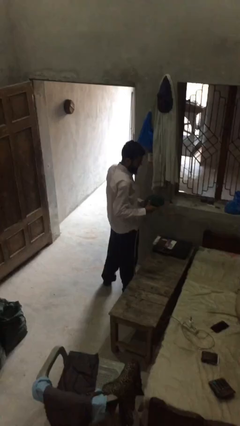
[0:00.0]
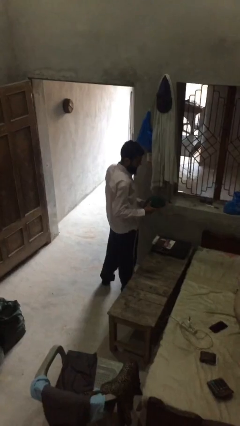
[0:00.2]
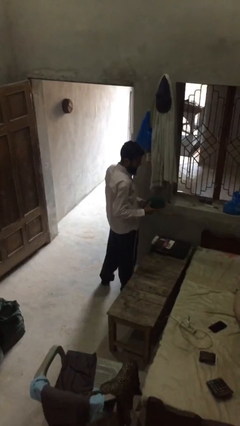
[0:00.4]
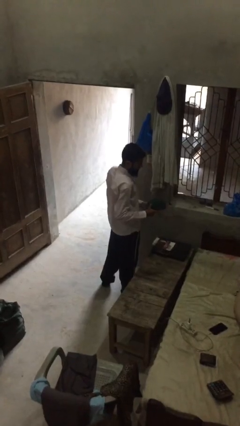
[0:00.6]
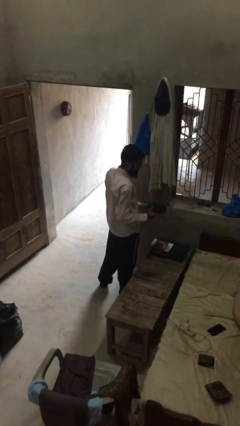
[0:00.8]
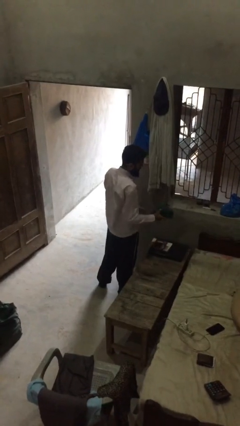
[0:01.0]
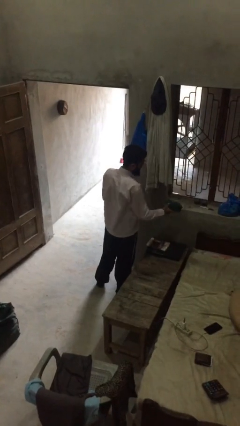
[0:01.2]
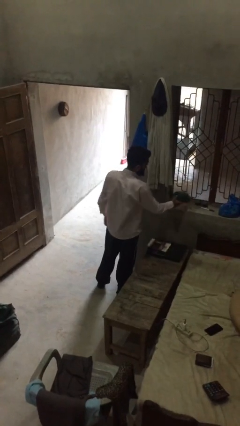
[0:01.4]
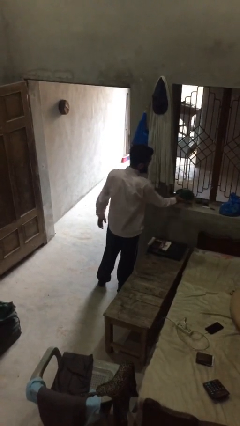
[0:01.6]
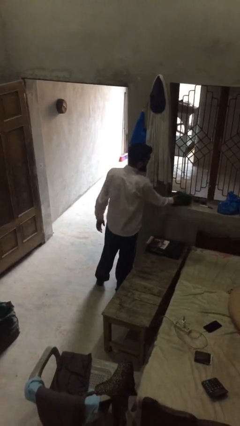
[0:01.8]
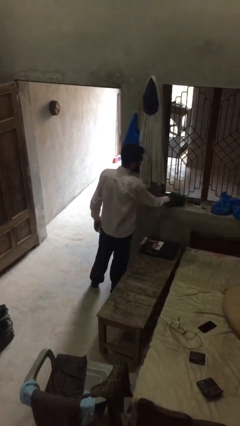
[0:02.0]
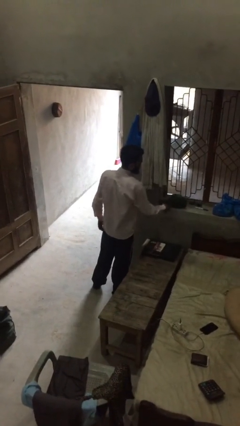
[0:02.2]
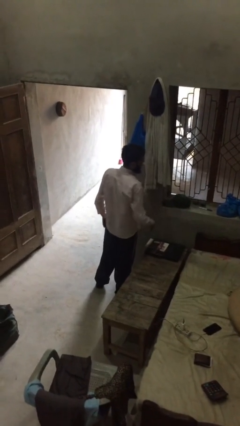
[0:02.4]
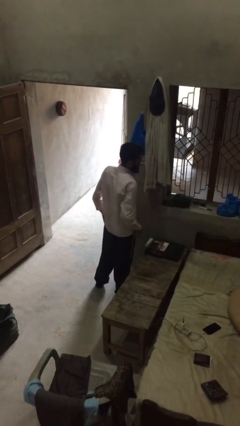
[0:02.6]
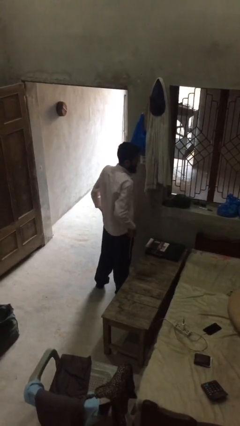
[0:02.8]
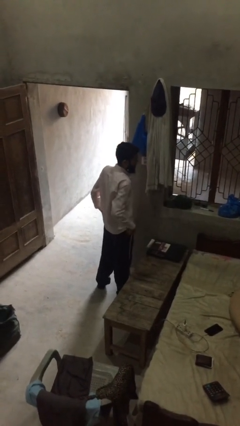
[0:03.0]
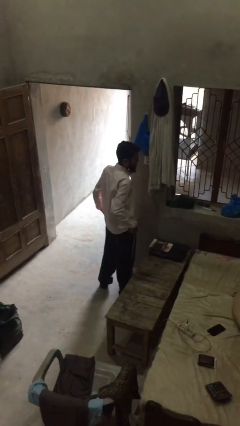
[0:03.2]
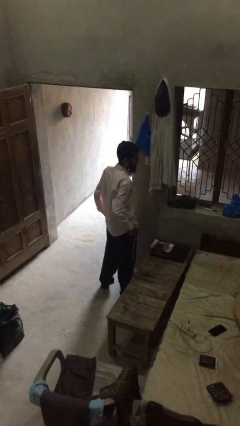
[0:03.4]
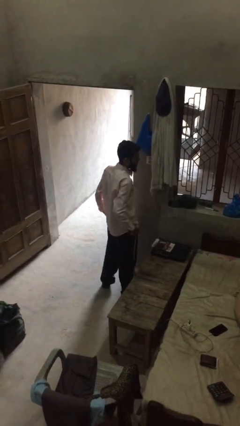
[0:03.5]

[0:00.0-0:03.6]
person puts down object on shelf

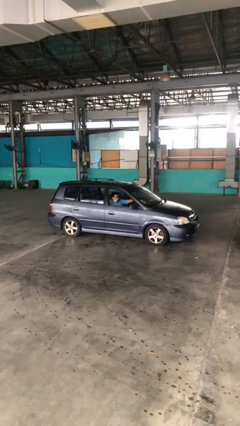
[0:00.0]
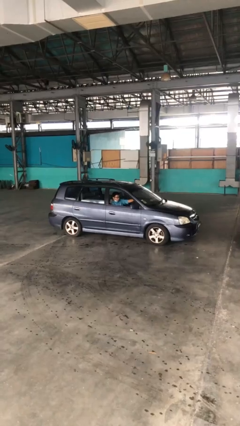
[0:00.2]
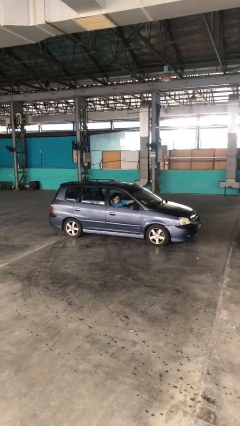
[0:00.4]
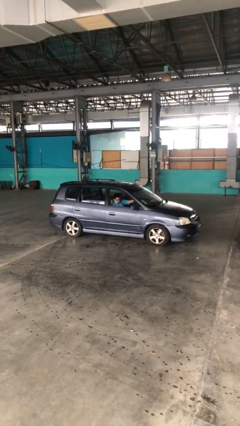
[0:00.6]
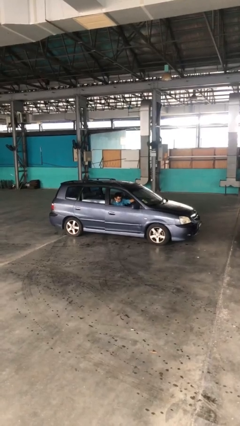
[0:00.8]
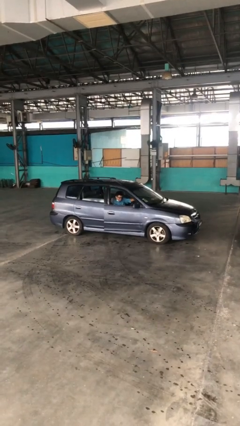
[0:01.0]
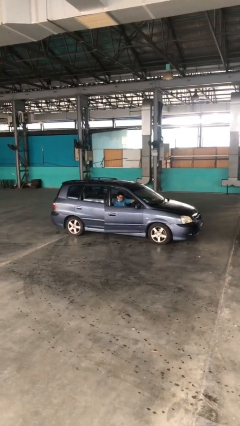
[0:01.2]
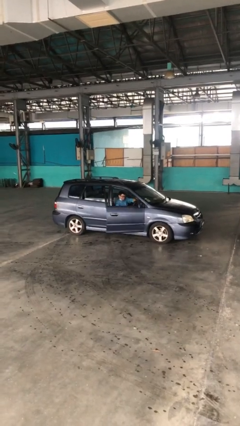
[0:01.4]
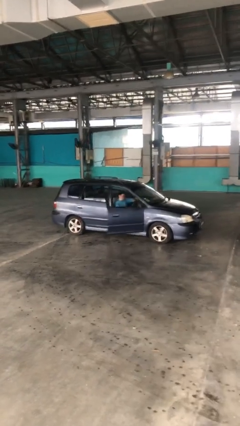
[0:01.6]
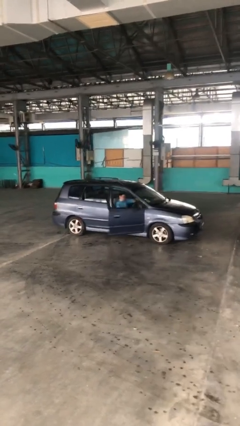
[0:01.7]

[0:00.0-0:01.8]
person opens car door

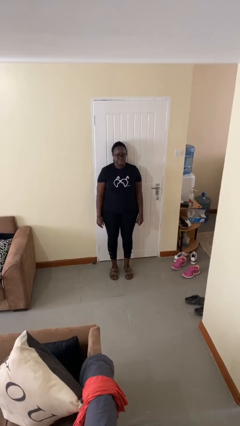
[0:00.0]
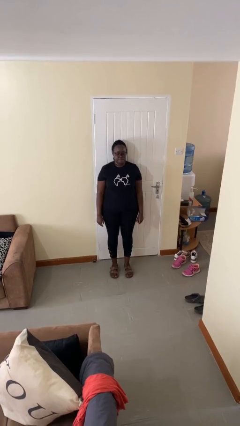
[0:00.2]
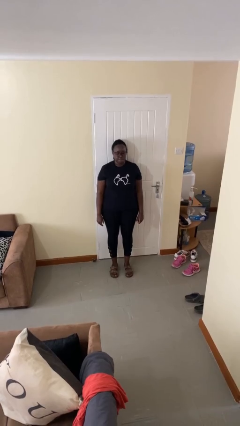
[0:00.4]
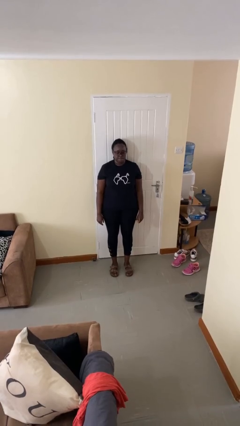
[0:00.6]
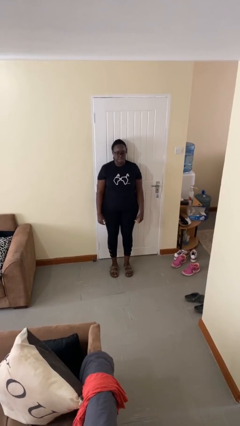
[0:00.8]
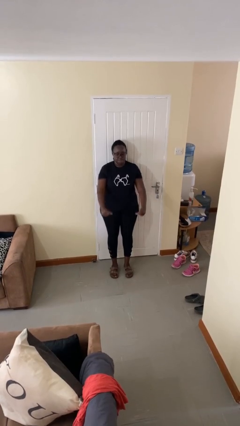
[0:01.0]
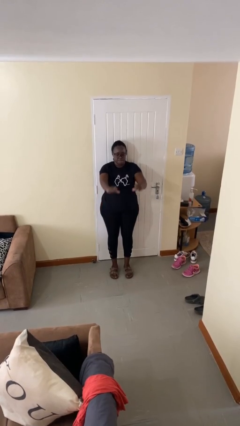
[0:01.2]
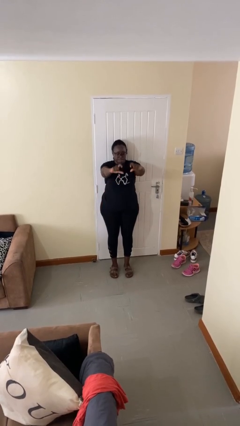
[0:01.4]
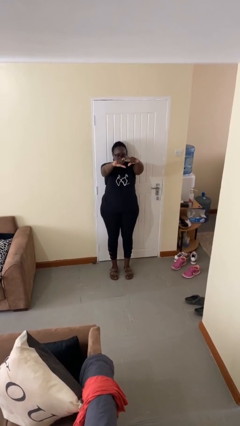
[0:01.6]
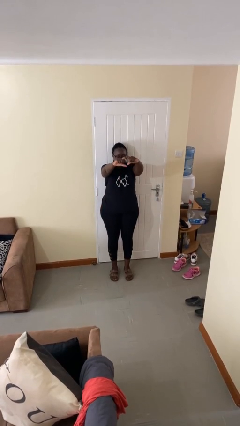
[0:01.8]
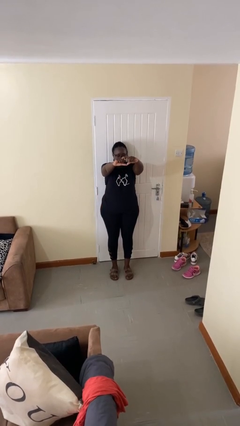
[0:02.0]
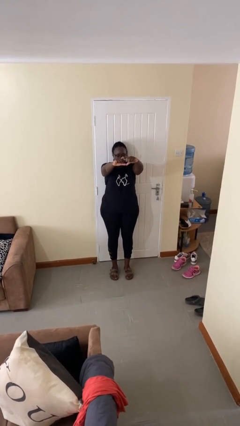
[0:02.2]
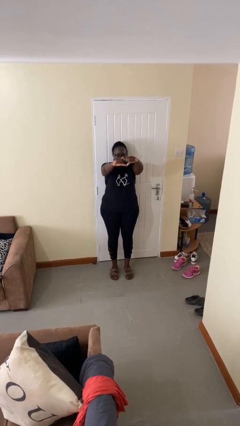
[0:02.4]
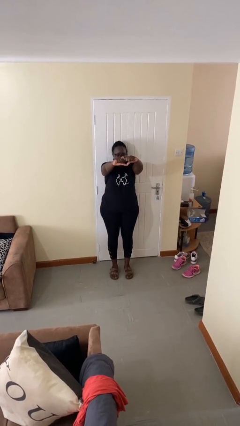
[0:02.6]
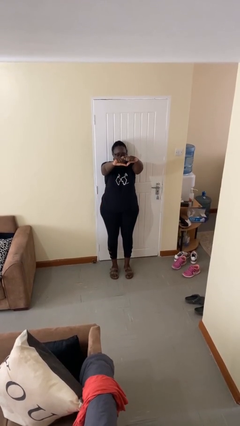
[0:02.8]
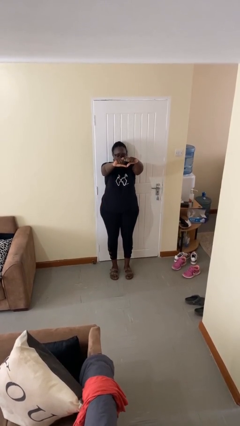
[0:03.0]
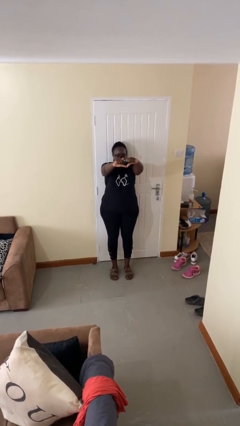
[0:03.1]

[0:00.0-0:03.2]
person gestures heart

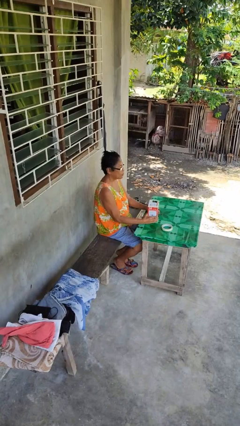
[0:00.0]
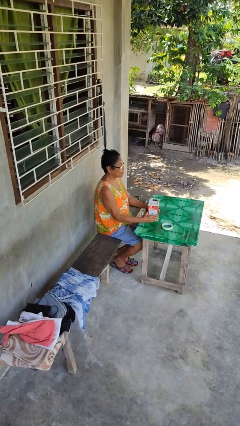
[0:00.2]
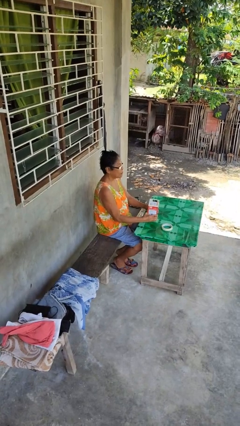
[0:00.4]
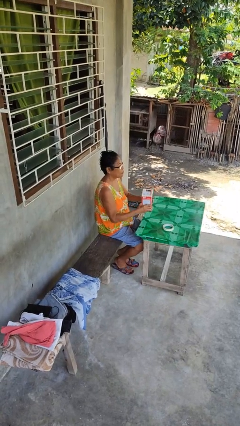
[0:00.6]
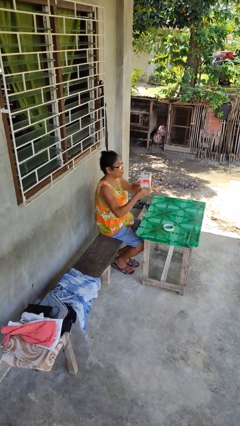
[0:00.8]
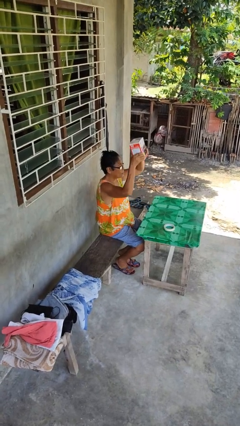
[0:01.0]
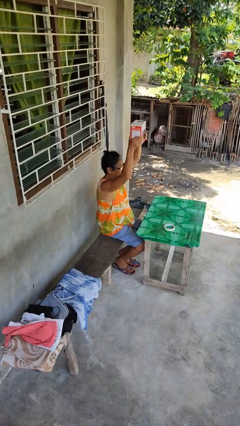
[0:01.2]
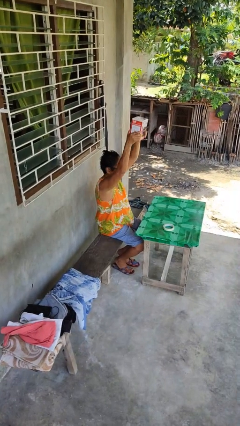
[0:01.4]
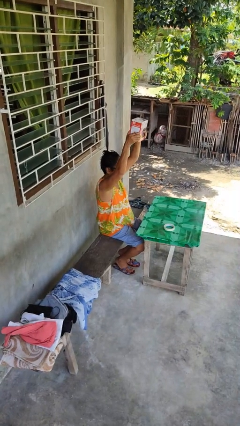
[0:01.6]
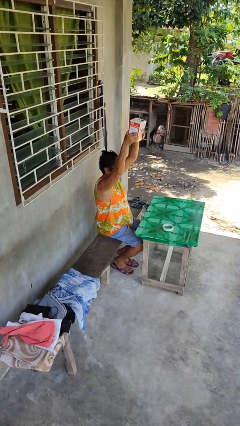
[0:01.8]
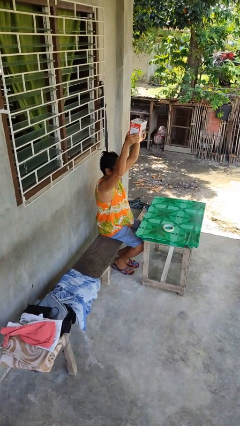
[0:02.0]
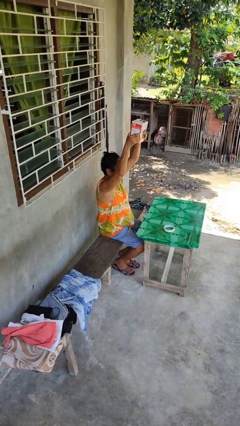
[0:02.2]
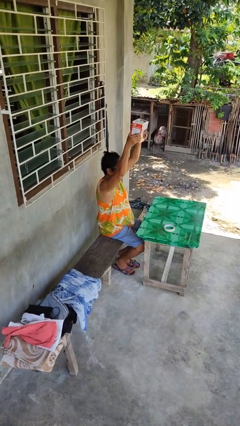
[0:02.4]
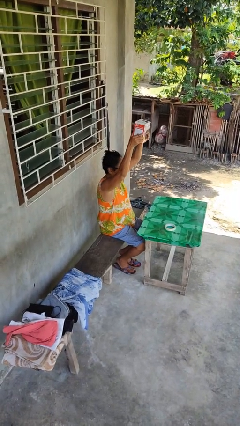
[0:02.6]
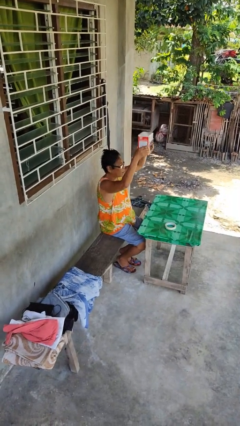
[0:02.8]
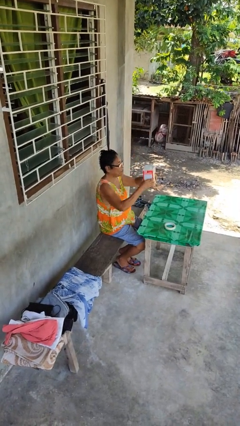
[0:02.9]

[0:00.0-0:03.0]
person holds object above head

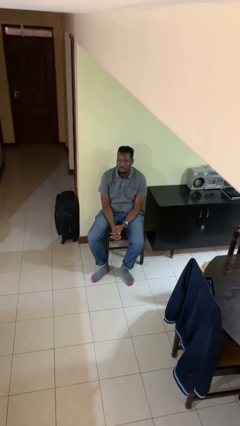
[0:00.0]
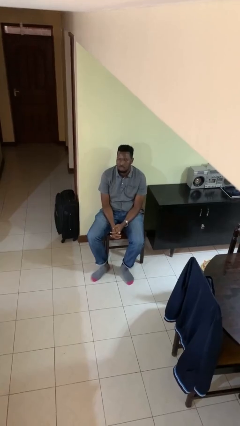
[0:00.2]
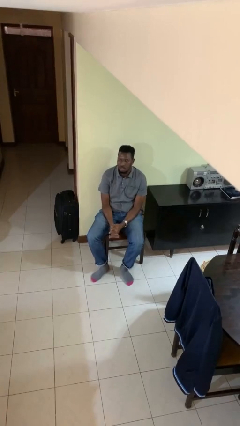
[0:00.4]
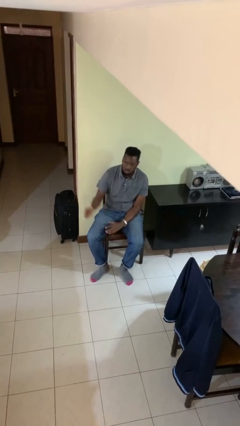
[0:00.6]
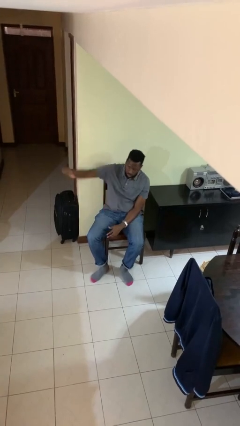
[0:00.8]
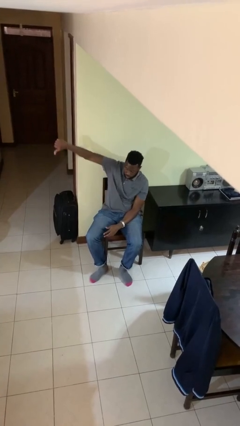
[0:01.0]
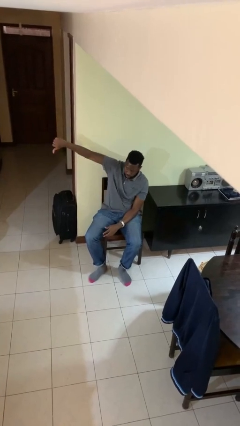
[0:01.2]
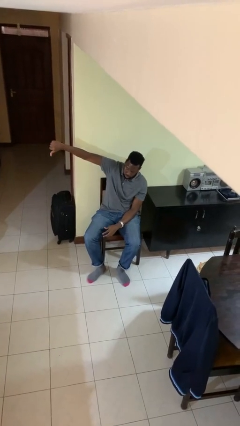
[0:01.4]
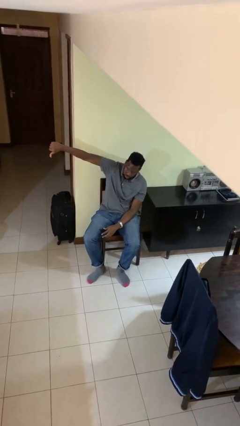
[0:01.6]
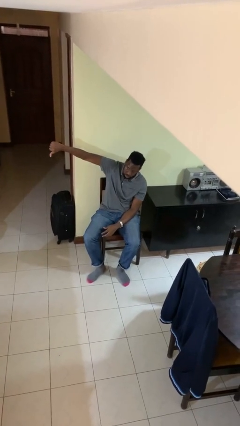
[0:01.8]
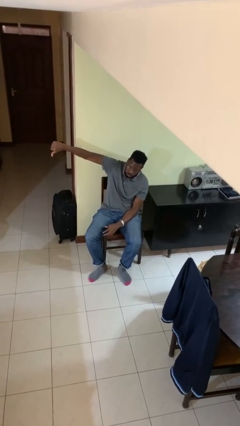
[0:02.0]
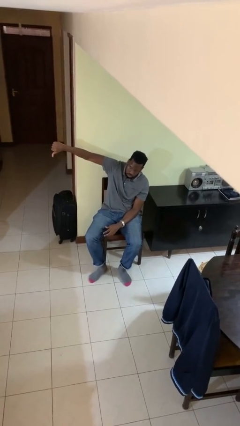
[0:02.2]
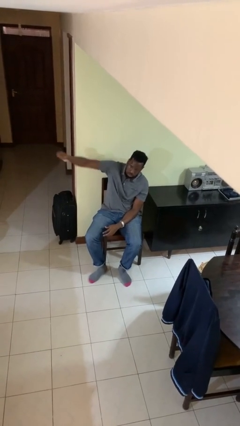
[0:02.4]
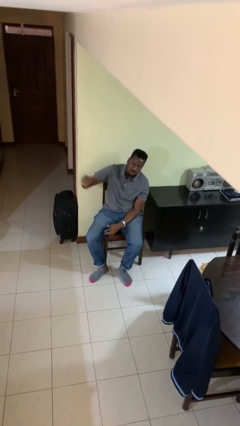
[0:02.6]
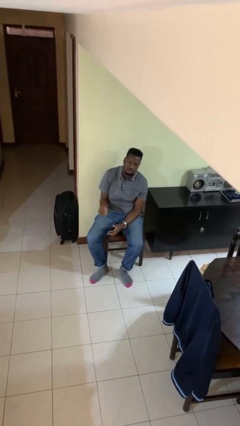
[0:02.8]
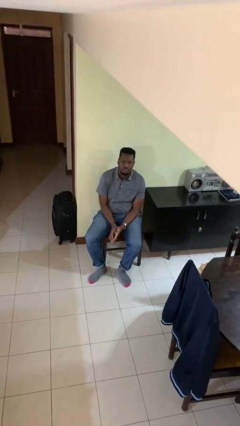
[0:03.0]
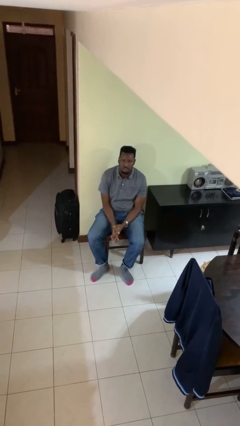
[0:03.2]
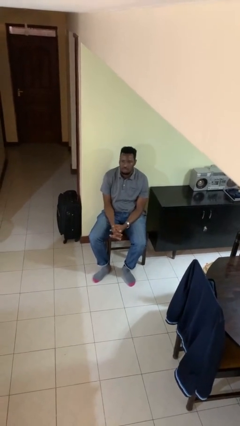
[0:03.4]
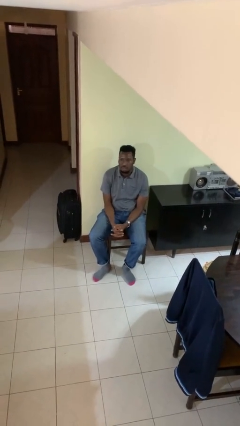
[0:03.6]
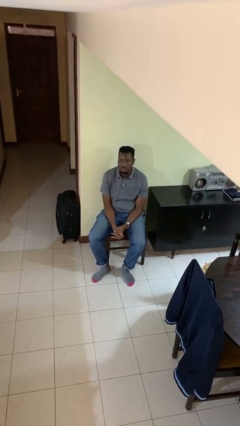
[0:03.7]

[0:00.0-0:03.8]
person gestures thumbs down

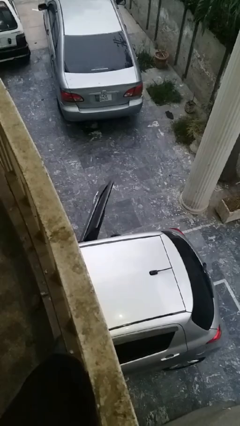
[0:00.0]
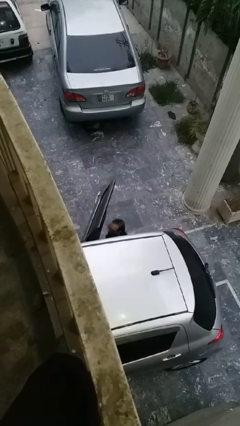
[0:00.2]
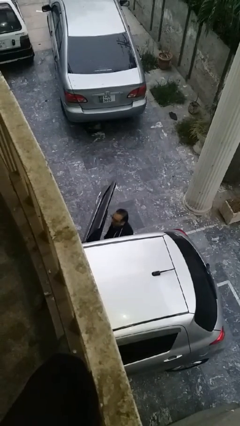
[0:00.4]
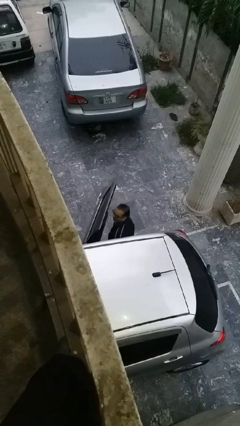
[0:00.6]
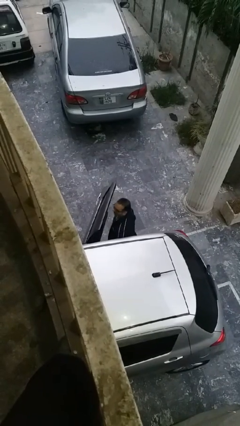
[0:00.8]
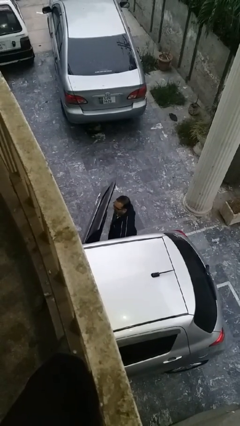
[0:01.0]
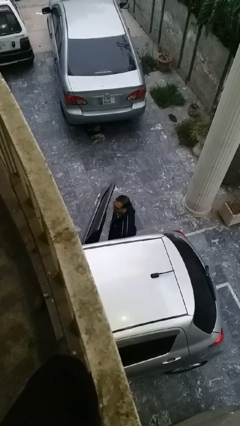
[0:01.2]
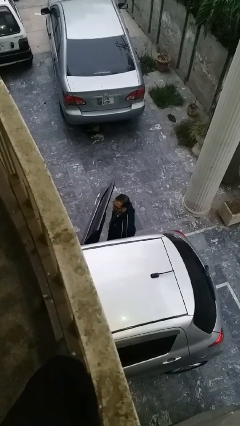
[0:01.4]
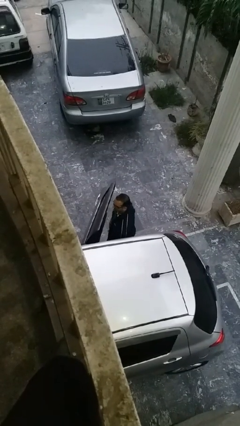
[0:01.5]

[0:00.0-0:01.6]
person exits car

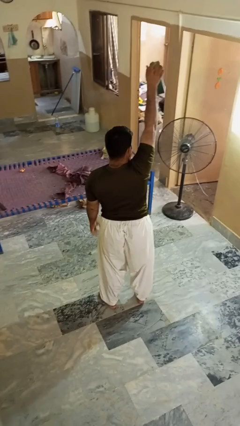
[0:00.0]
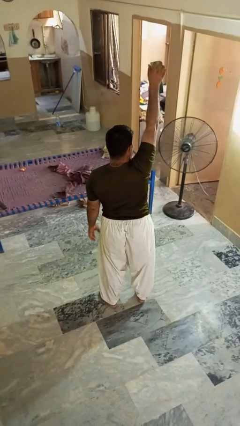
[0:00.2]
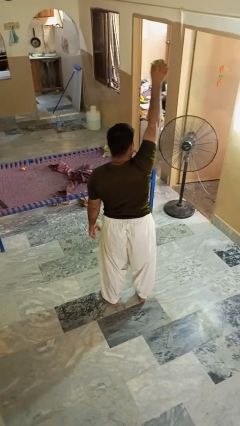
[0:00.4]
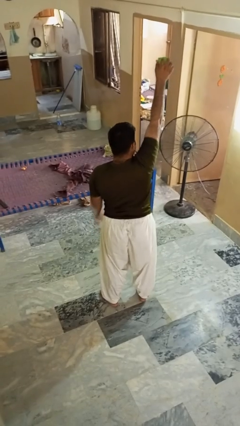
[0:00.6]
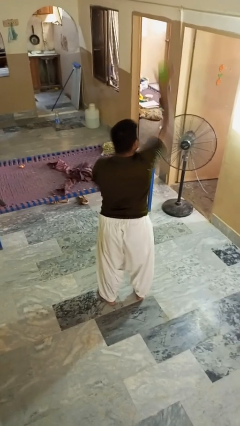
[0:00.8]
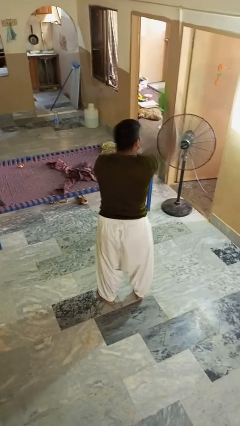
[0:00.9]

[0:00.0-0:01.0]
person drops object
